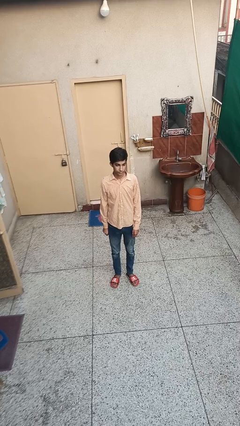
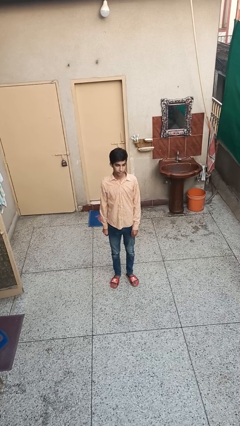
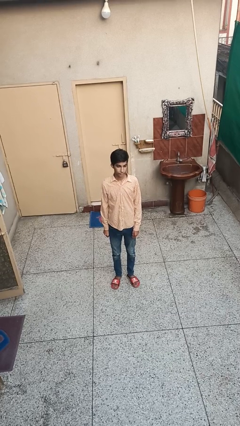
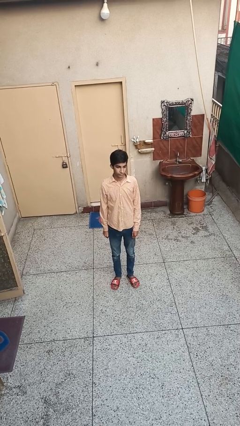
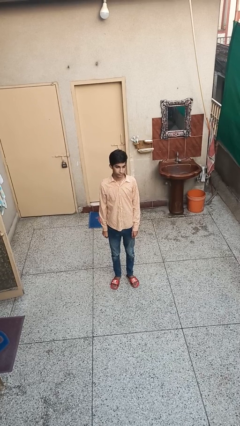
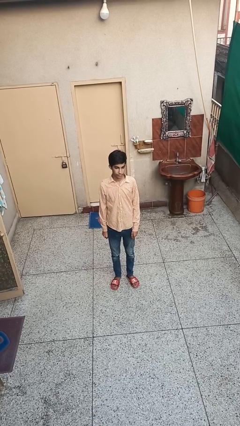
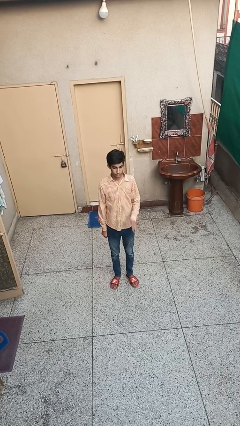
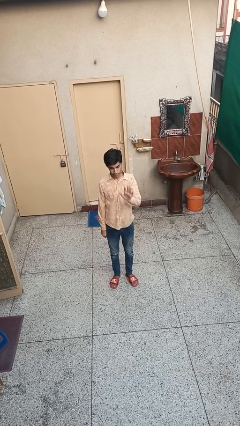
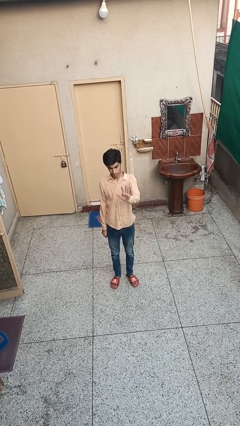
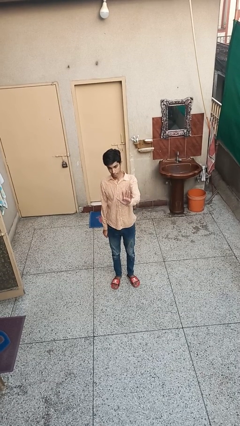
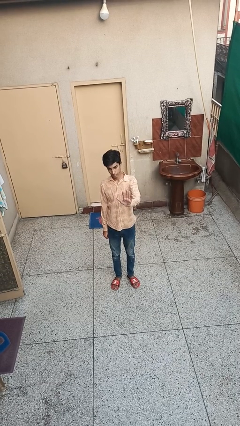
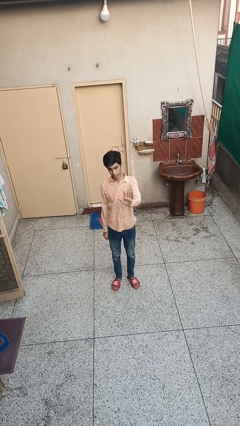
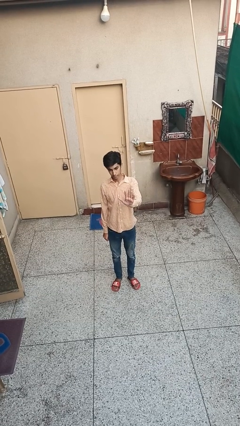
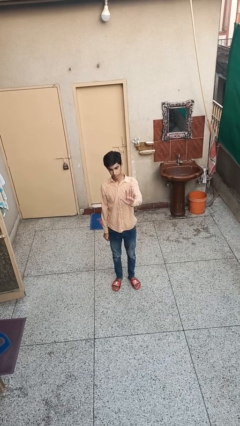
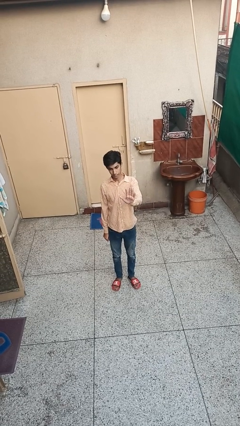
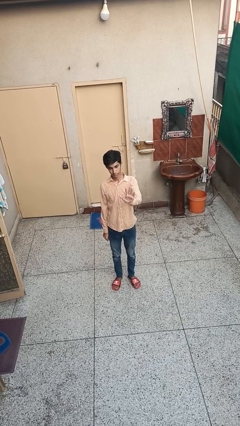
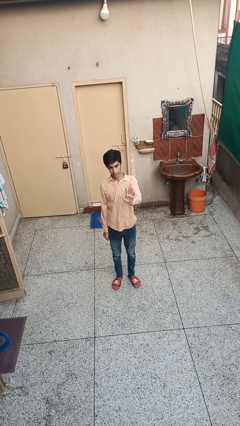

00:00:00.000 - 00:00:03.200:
person gestures number five

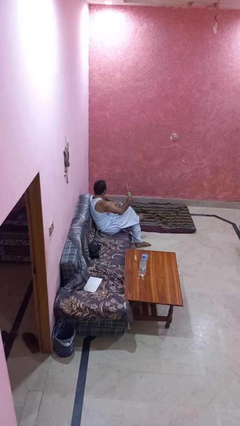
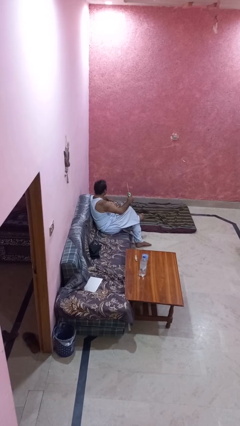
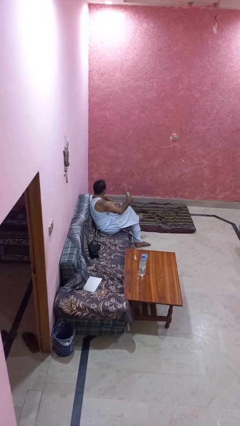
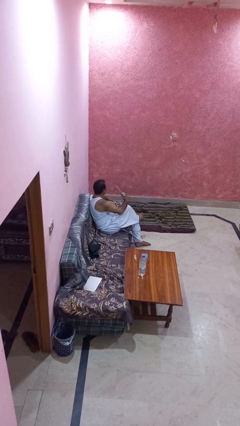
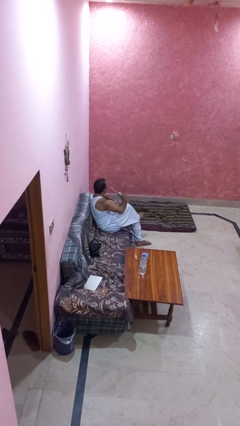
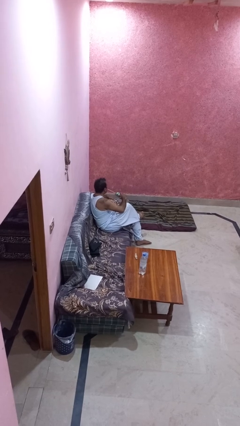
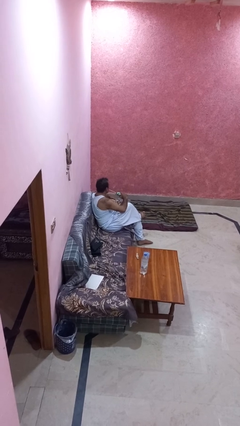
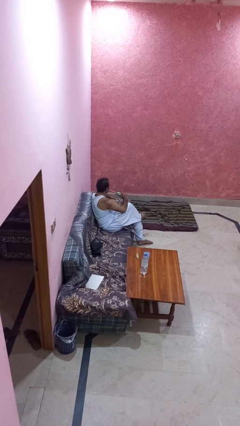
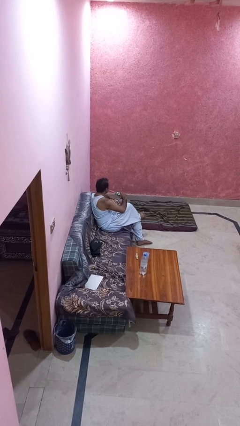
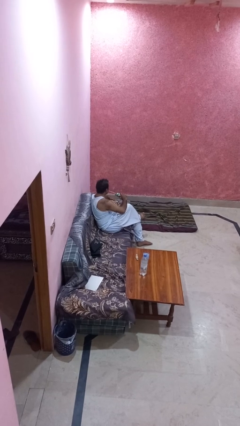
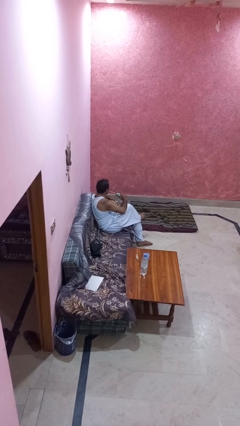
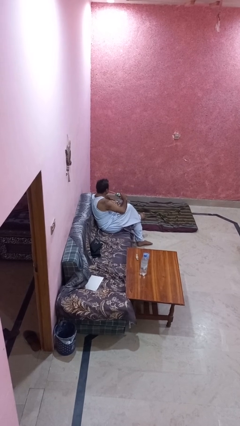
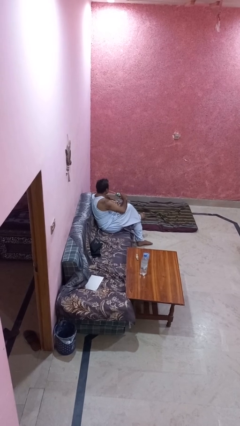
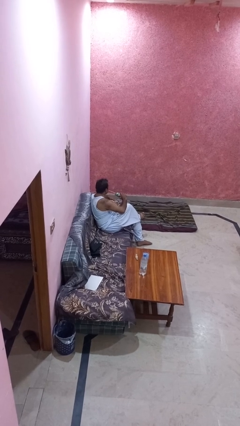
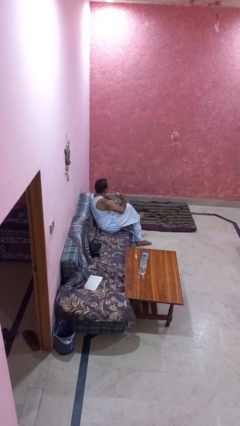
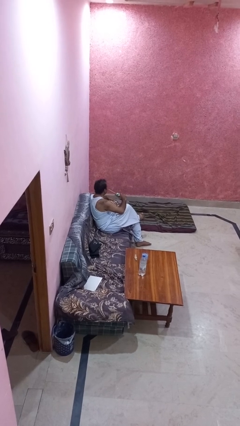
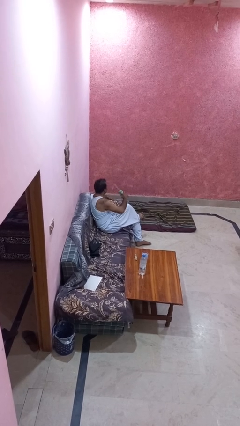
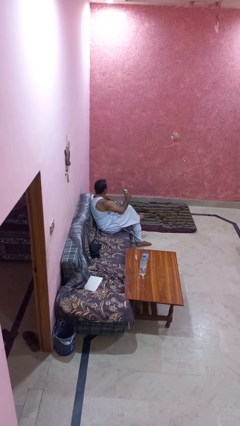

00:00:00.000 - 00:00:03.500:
person drinks from straw

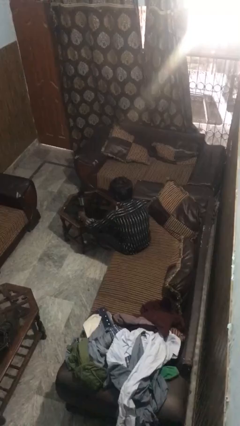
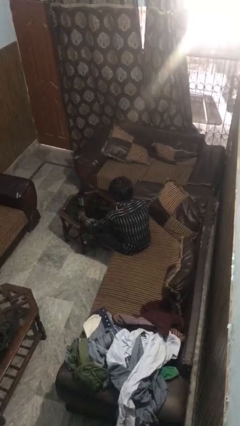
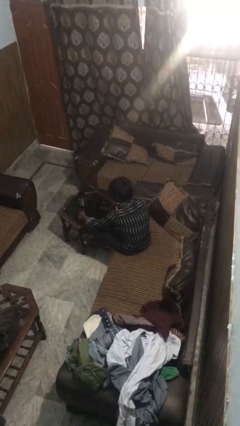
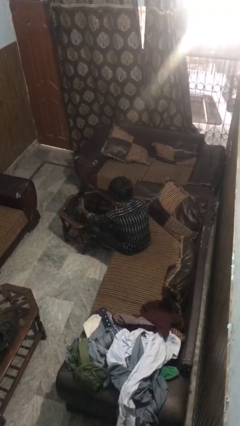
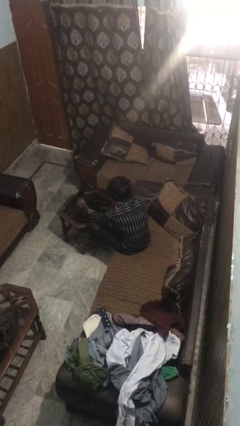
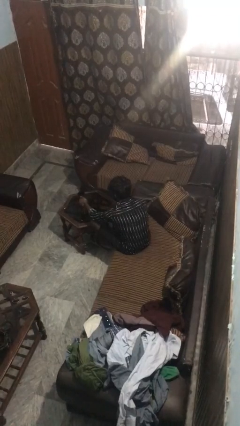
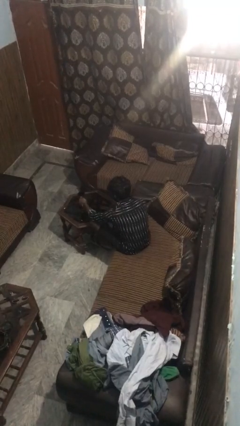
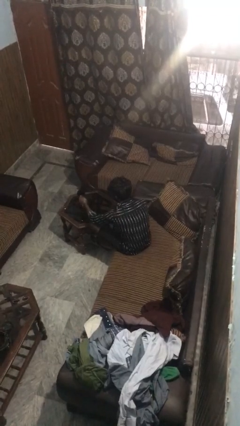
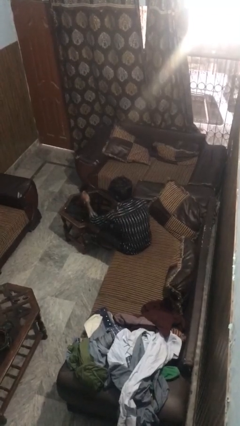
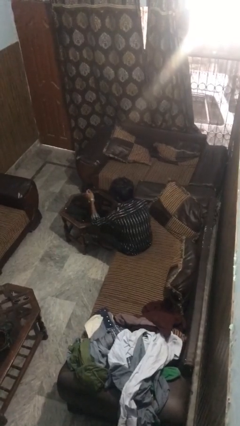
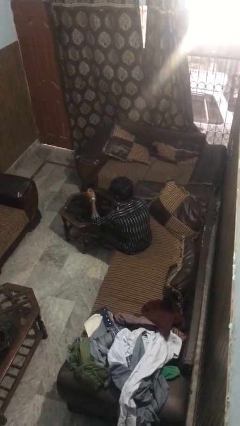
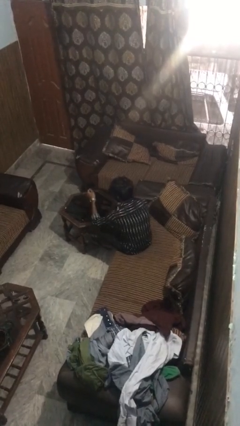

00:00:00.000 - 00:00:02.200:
person picks up object from table

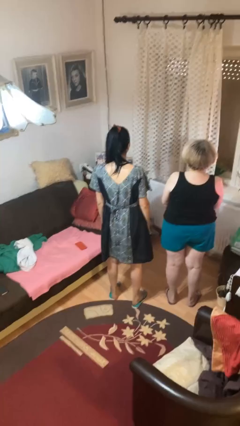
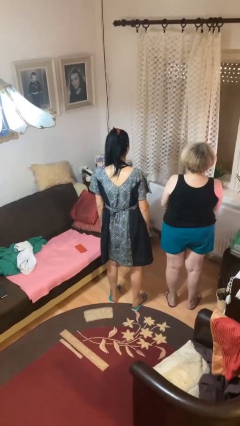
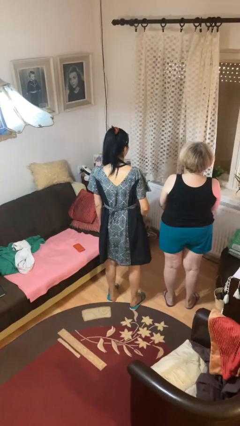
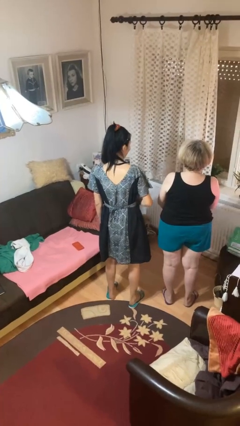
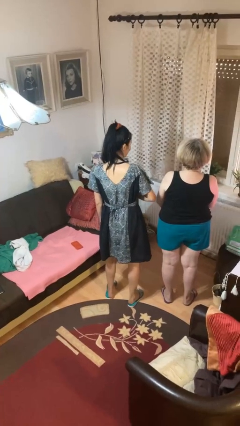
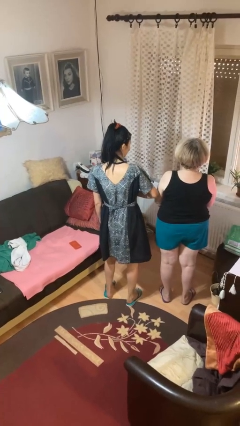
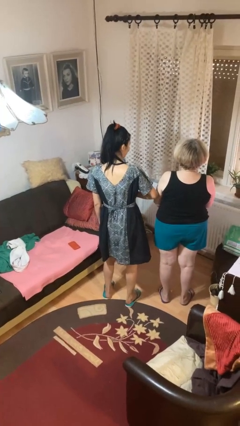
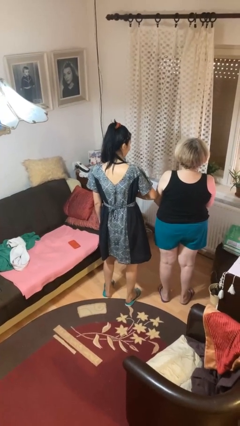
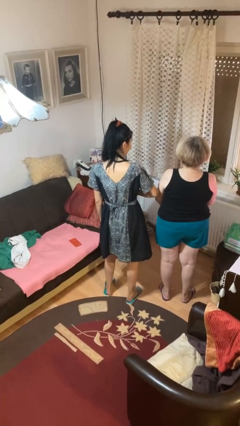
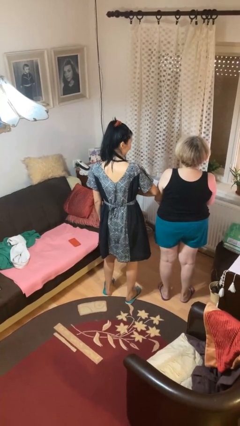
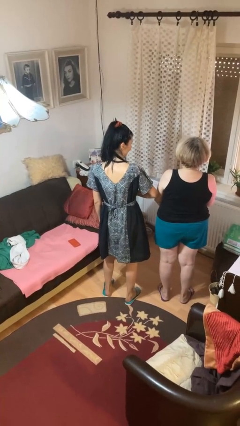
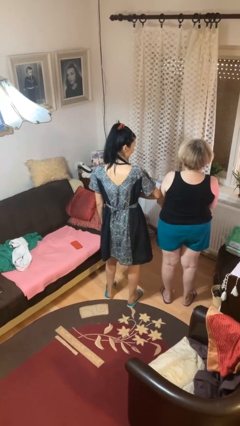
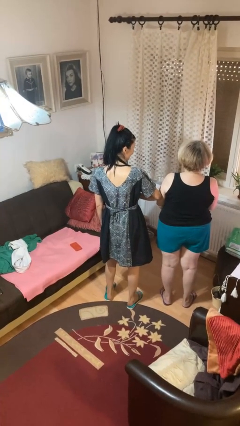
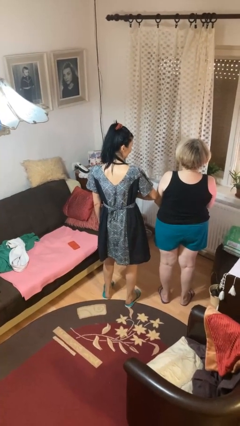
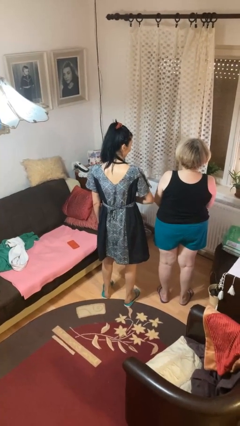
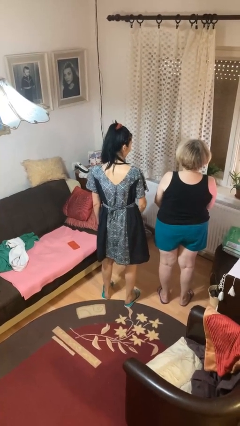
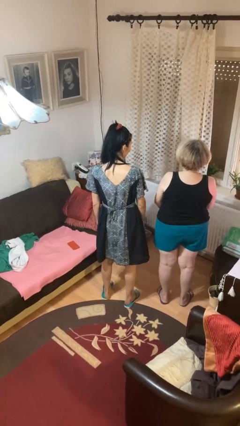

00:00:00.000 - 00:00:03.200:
person nudges person with elbow

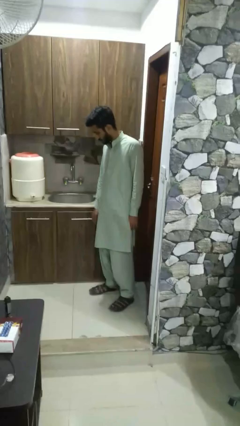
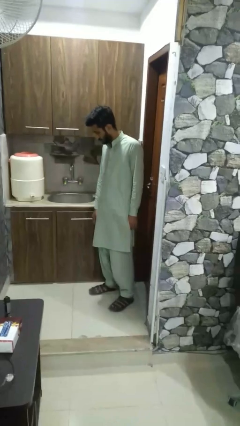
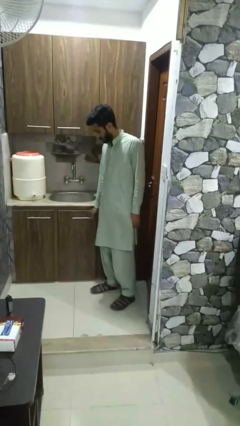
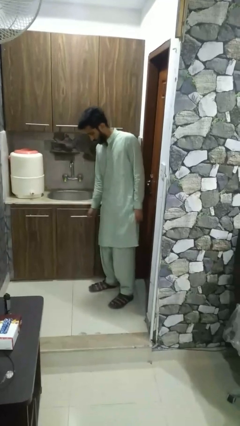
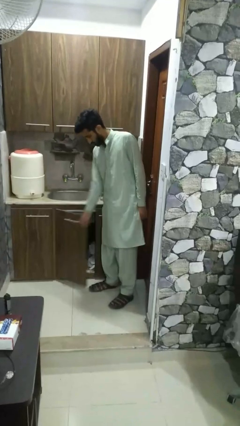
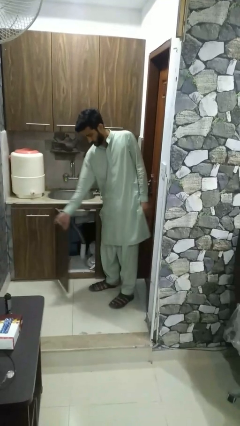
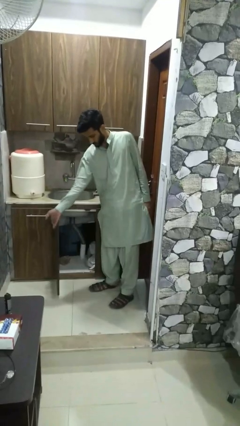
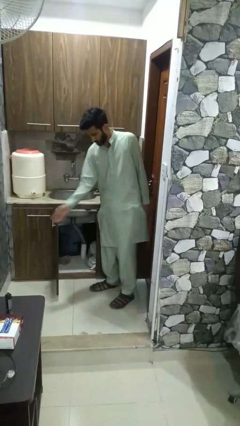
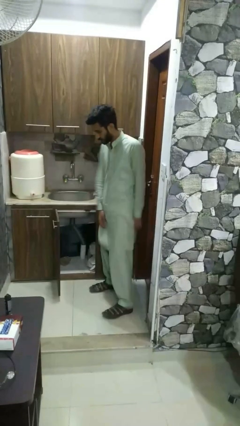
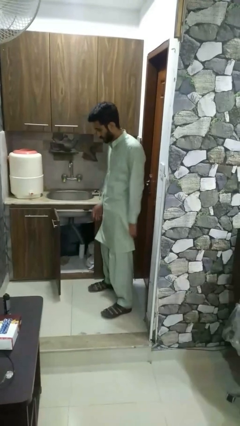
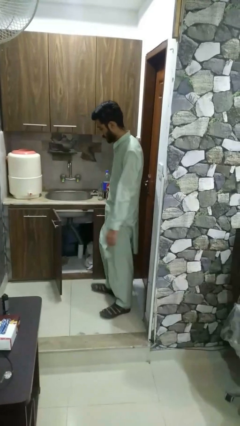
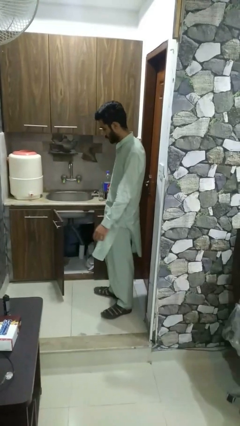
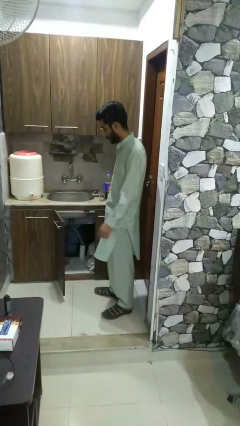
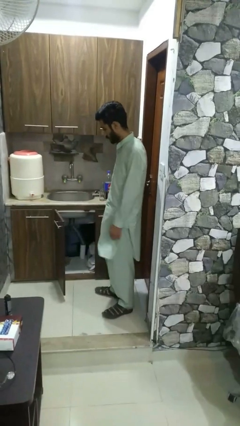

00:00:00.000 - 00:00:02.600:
person opens closet door

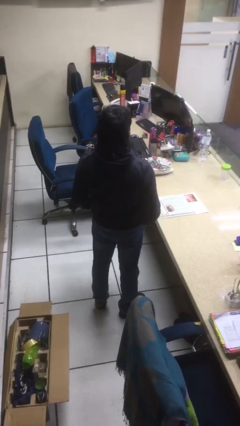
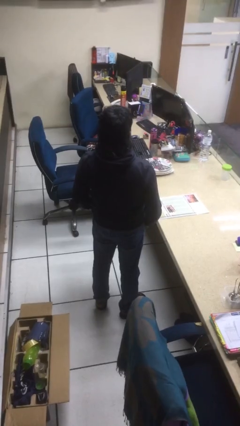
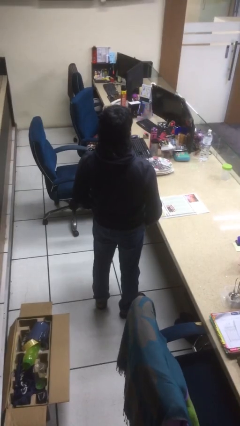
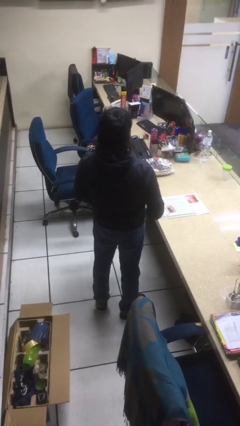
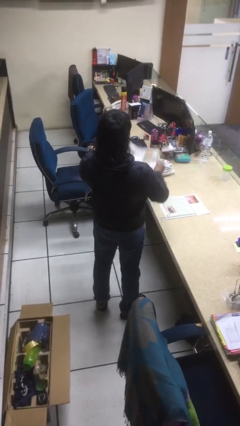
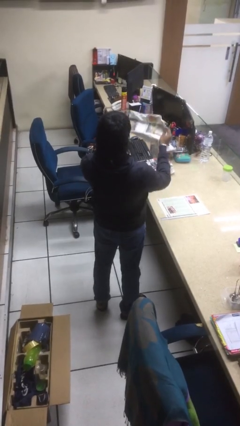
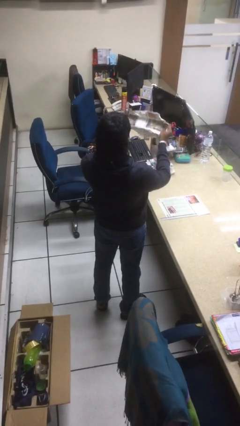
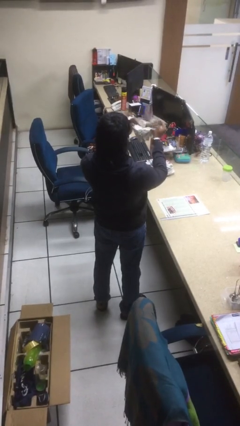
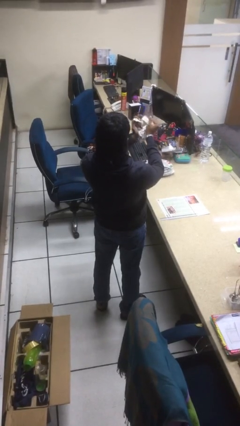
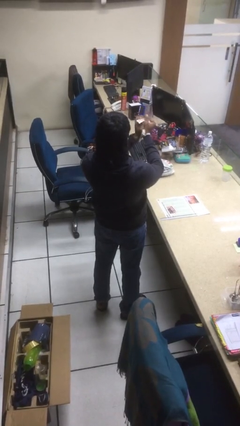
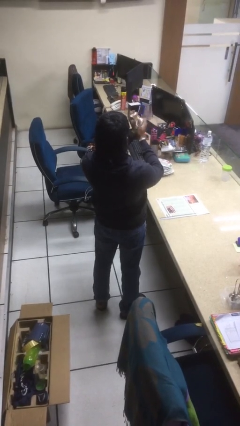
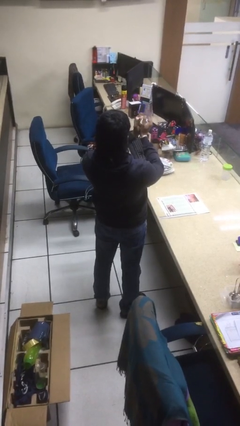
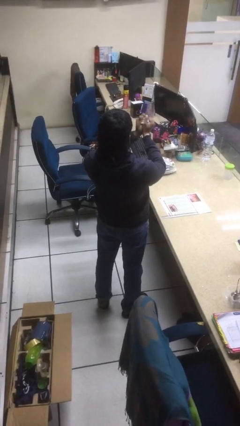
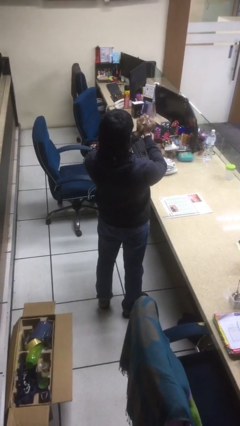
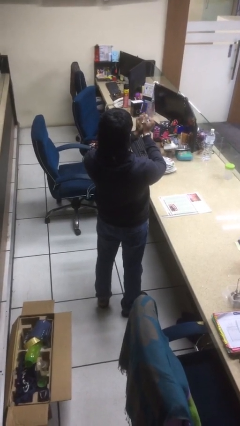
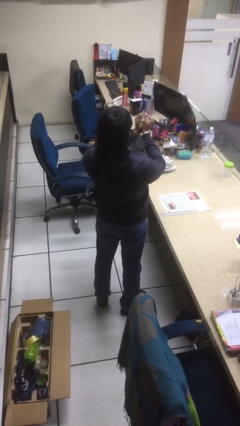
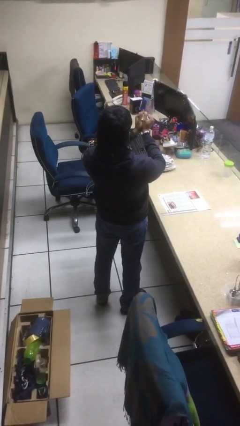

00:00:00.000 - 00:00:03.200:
person crumples paper
